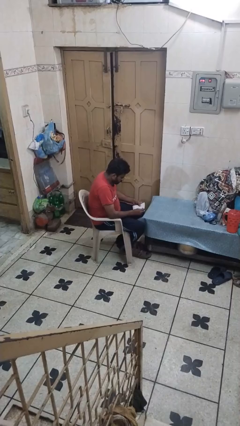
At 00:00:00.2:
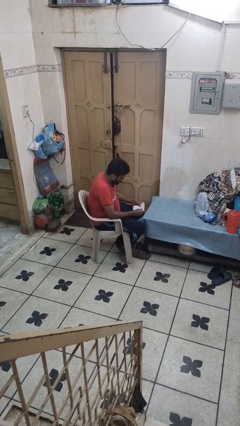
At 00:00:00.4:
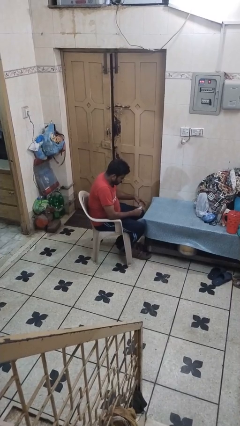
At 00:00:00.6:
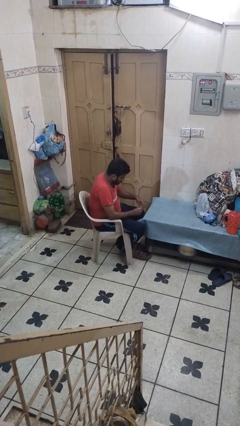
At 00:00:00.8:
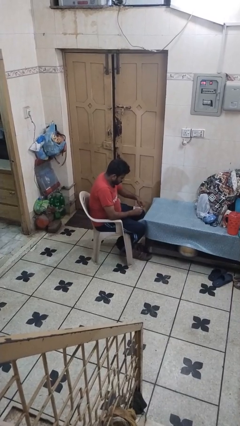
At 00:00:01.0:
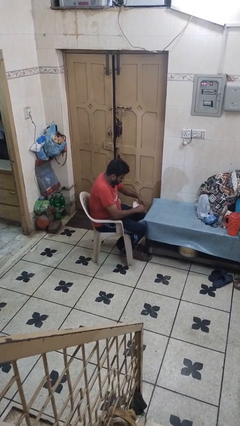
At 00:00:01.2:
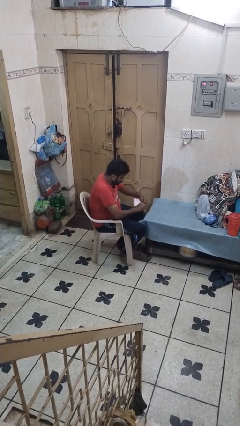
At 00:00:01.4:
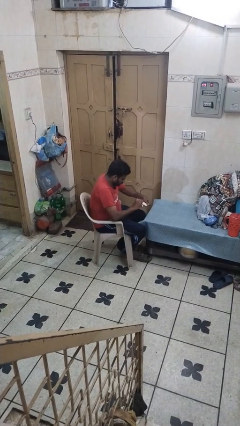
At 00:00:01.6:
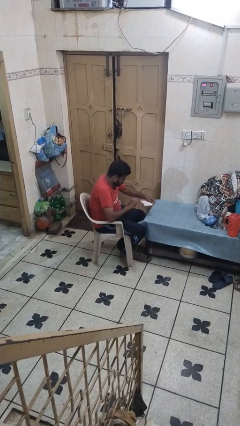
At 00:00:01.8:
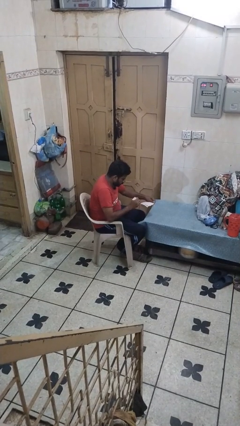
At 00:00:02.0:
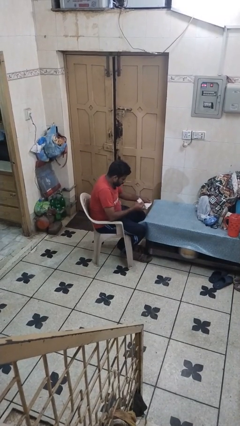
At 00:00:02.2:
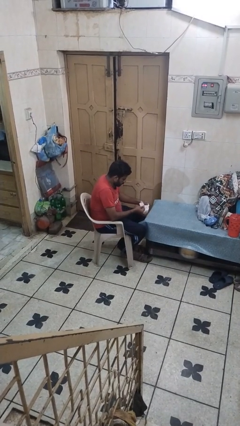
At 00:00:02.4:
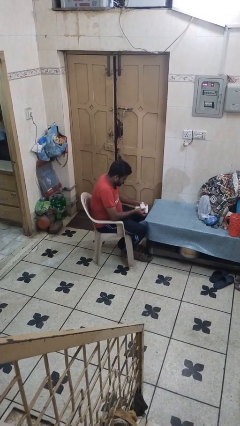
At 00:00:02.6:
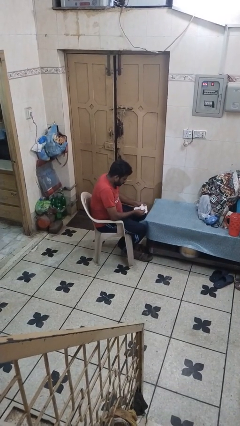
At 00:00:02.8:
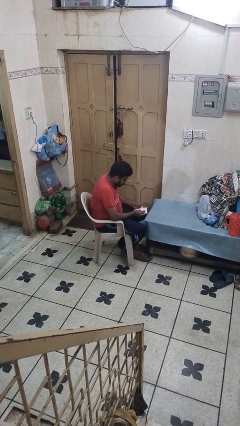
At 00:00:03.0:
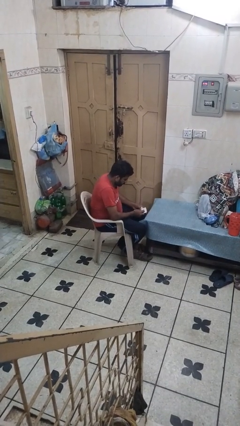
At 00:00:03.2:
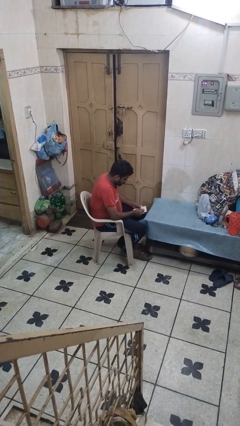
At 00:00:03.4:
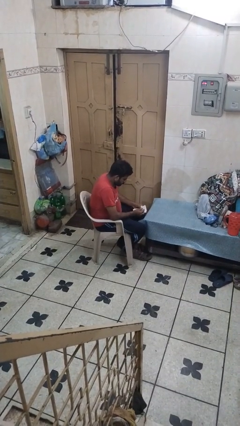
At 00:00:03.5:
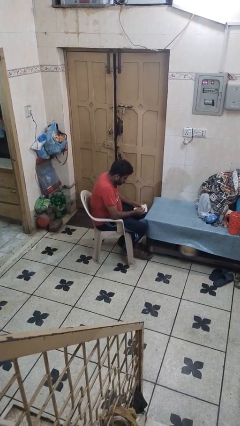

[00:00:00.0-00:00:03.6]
person tears paper

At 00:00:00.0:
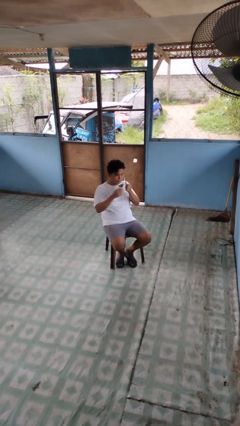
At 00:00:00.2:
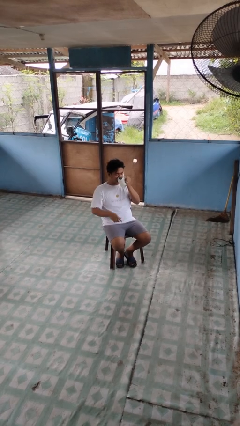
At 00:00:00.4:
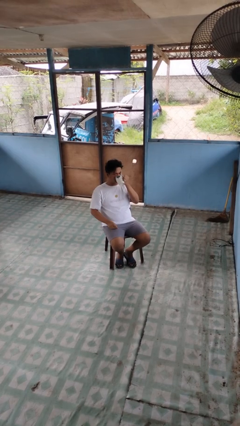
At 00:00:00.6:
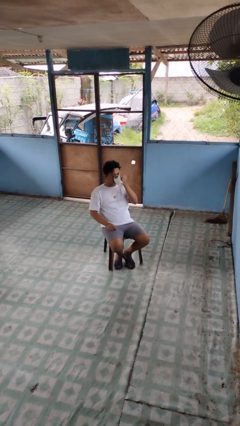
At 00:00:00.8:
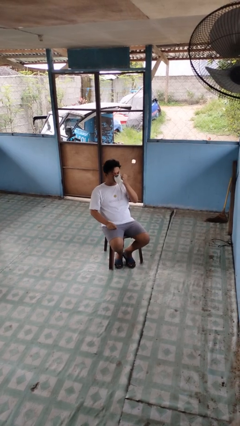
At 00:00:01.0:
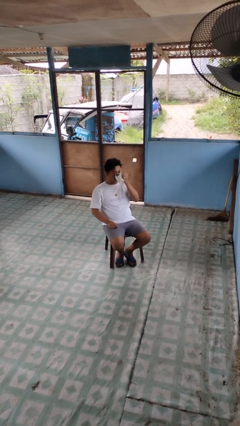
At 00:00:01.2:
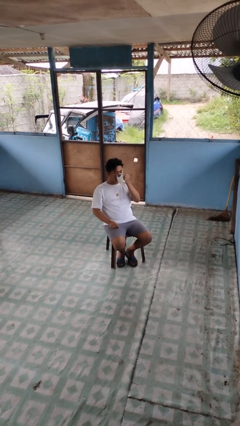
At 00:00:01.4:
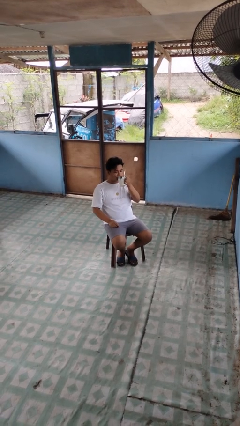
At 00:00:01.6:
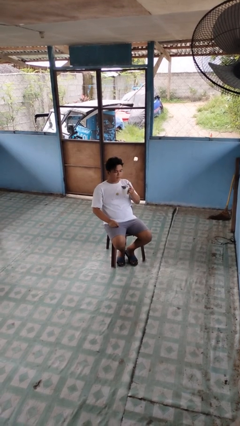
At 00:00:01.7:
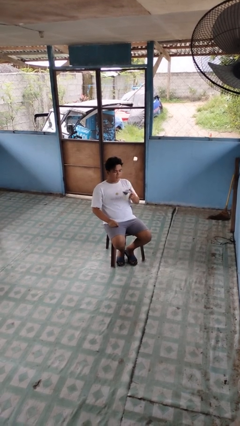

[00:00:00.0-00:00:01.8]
person drinks from mug

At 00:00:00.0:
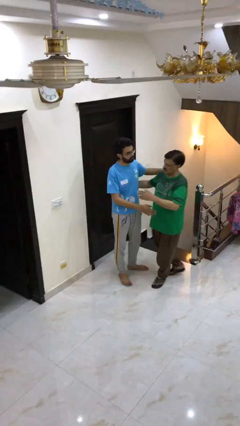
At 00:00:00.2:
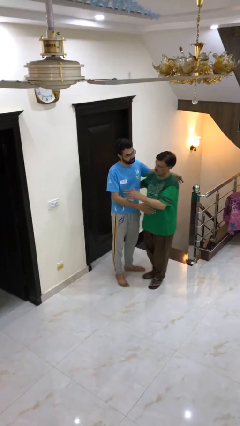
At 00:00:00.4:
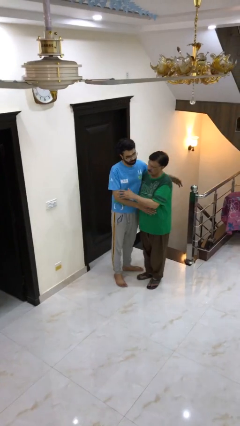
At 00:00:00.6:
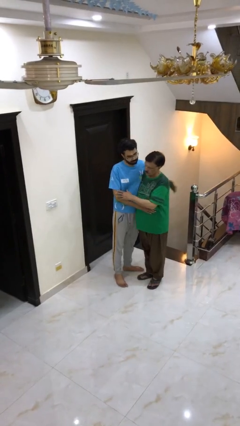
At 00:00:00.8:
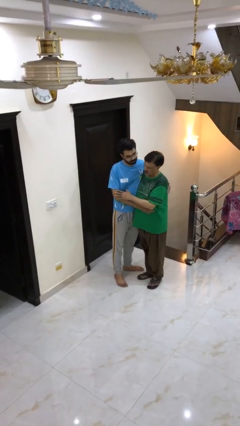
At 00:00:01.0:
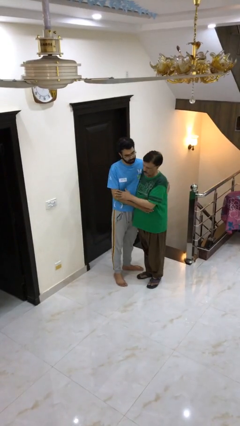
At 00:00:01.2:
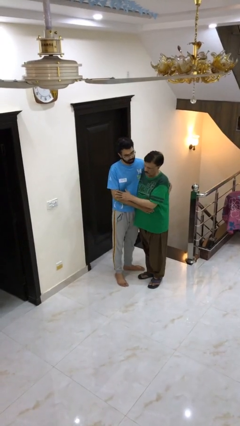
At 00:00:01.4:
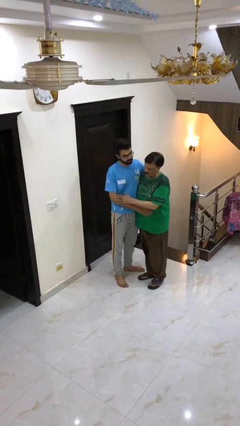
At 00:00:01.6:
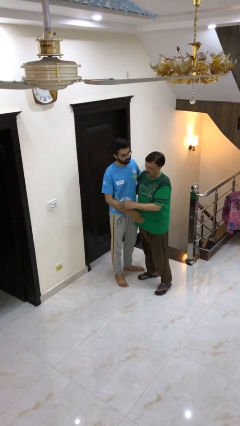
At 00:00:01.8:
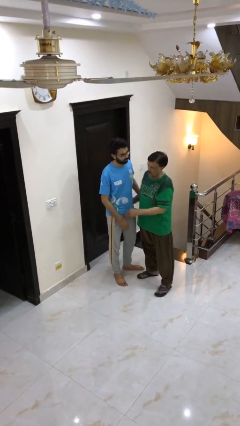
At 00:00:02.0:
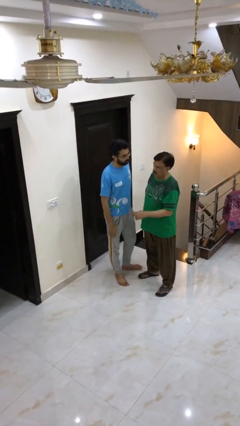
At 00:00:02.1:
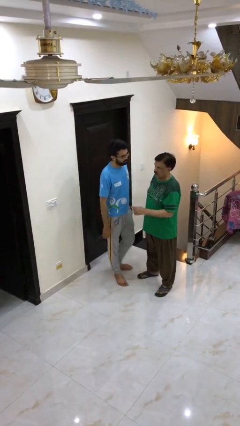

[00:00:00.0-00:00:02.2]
person embraces person

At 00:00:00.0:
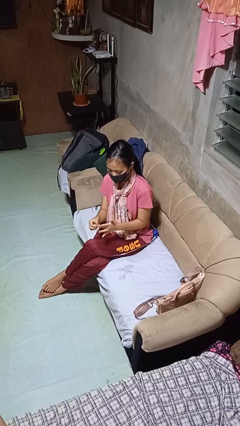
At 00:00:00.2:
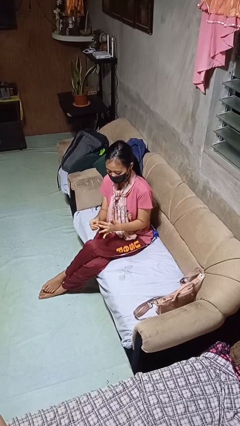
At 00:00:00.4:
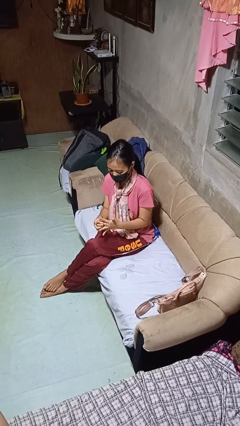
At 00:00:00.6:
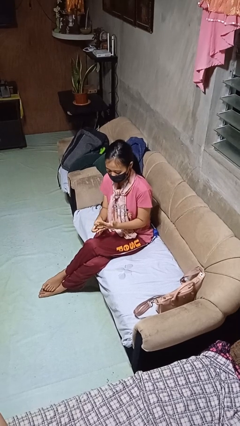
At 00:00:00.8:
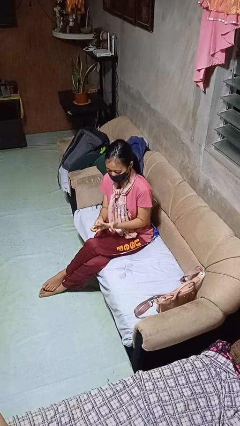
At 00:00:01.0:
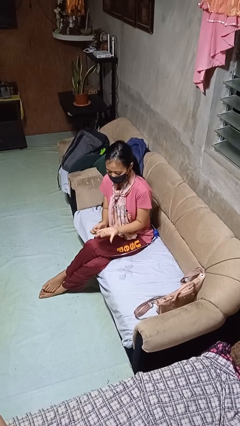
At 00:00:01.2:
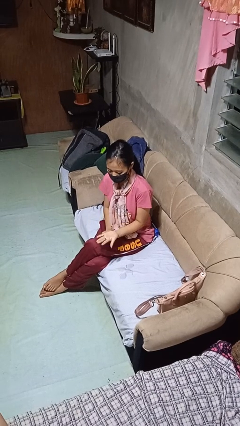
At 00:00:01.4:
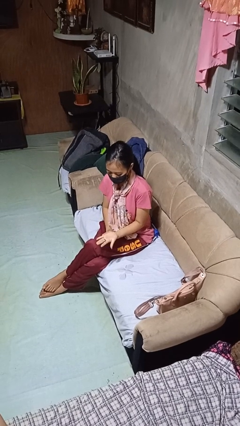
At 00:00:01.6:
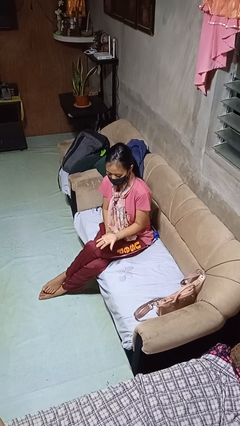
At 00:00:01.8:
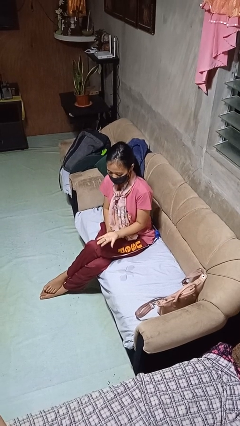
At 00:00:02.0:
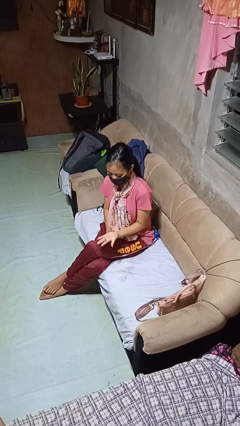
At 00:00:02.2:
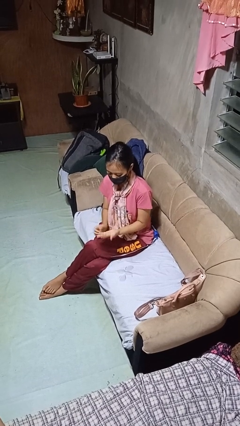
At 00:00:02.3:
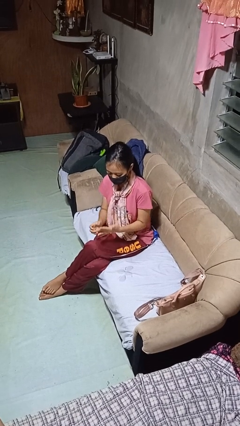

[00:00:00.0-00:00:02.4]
person puts on ring

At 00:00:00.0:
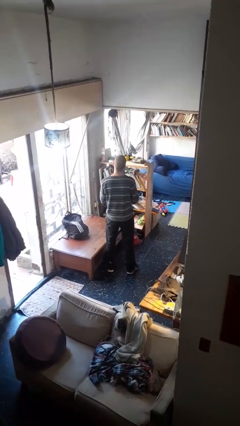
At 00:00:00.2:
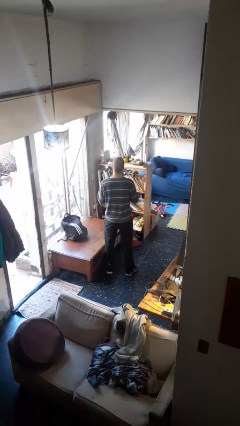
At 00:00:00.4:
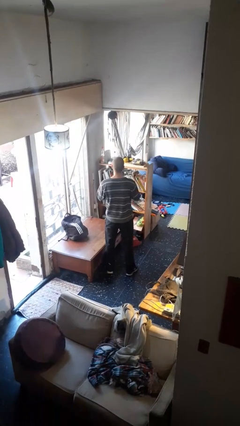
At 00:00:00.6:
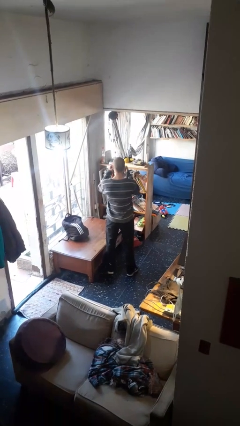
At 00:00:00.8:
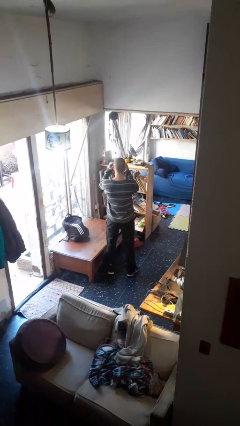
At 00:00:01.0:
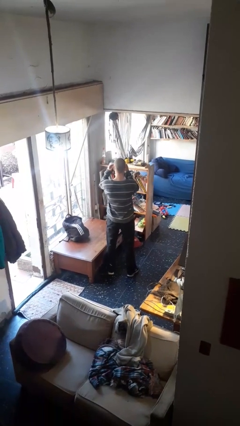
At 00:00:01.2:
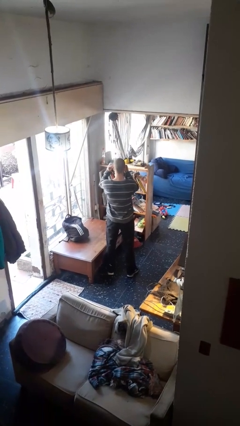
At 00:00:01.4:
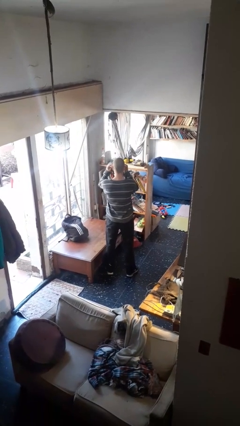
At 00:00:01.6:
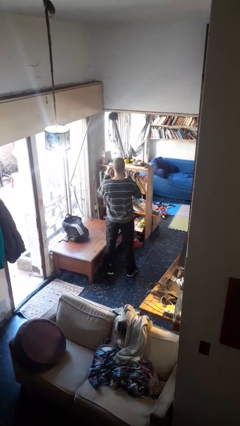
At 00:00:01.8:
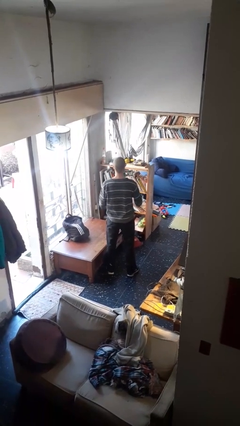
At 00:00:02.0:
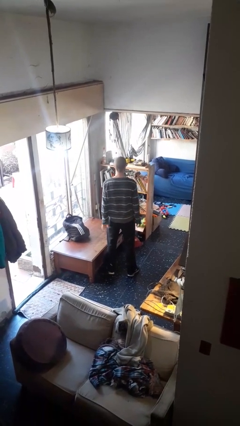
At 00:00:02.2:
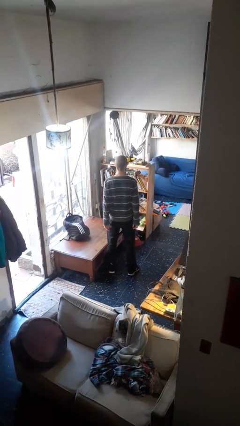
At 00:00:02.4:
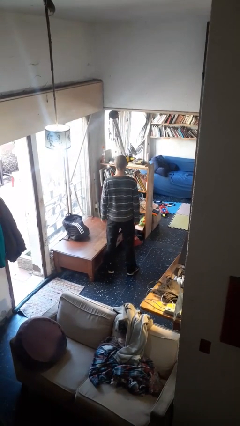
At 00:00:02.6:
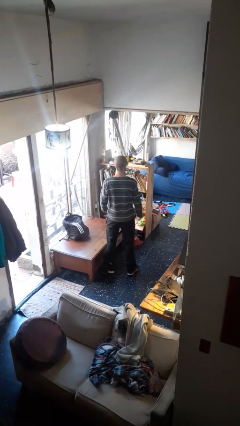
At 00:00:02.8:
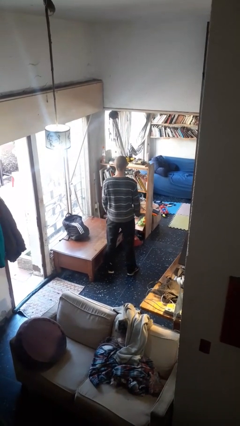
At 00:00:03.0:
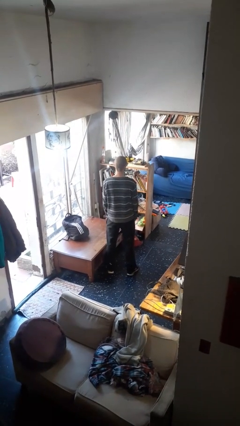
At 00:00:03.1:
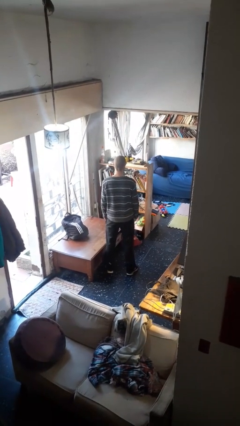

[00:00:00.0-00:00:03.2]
person puts on sunglasses

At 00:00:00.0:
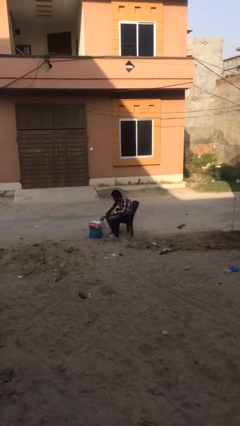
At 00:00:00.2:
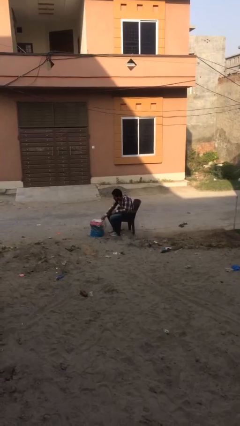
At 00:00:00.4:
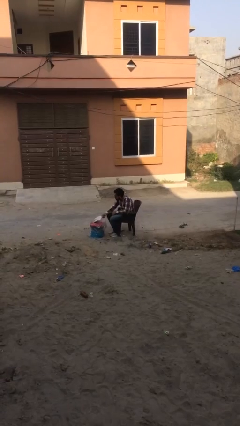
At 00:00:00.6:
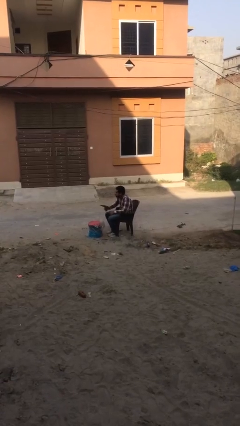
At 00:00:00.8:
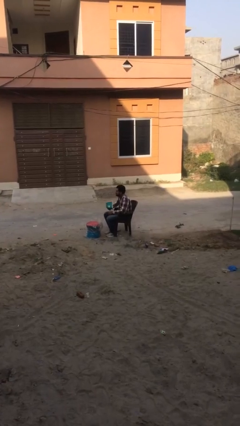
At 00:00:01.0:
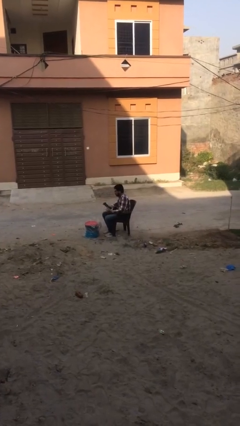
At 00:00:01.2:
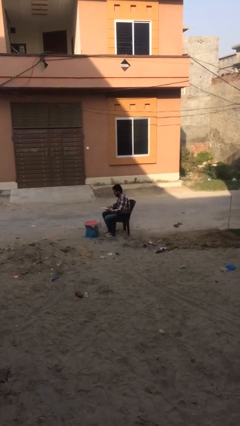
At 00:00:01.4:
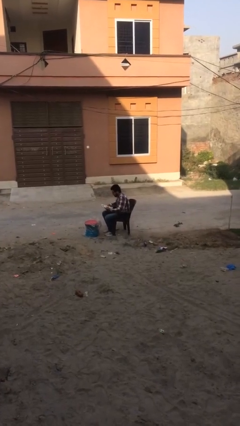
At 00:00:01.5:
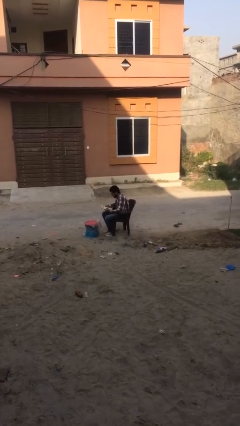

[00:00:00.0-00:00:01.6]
person picks up object from table

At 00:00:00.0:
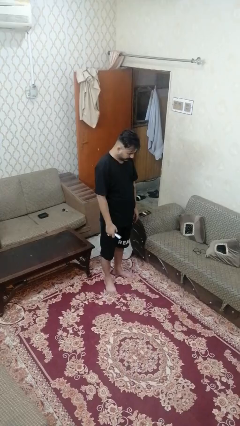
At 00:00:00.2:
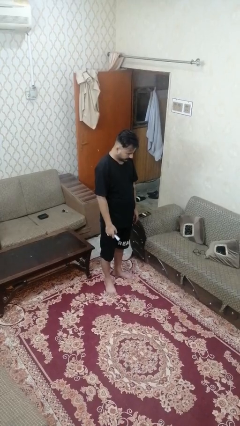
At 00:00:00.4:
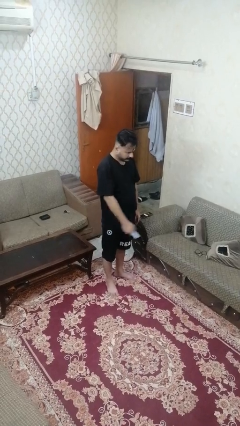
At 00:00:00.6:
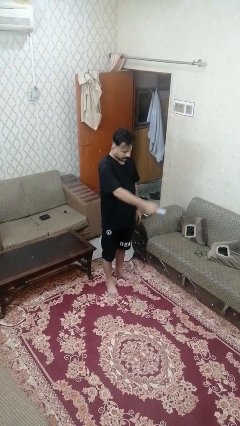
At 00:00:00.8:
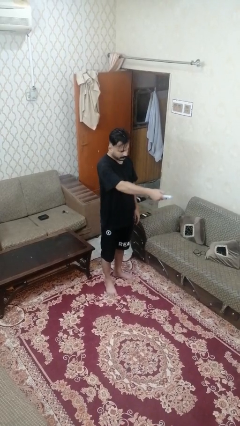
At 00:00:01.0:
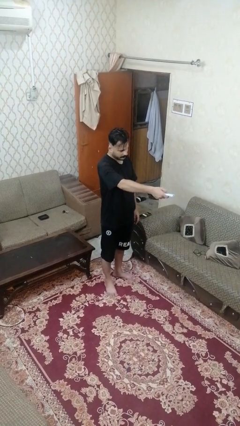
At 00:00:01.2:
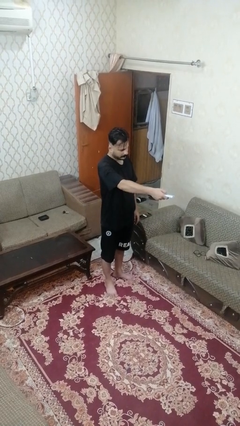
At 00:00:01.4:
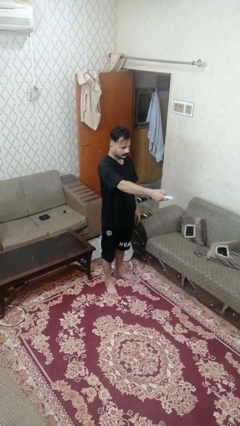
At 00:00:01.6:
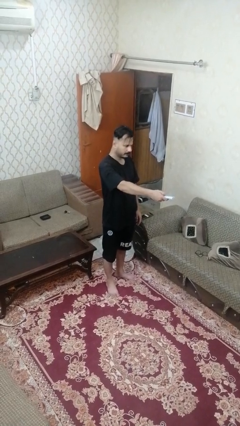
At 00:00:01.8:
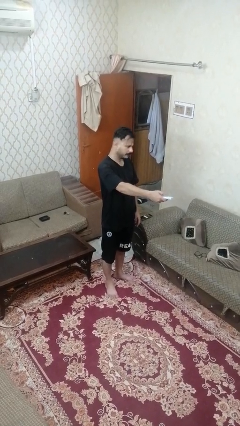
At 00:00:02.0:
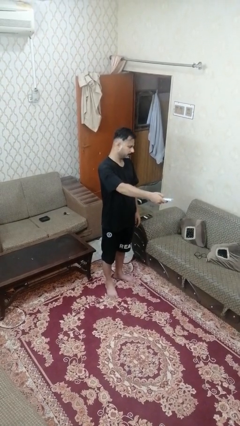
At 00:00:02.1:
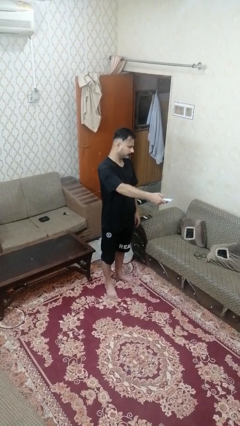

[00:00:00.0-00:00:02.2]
person uses television remote
